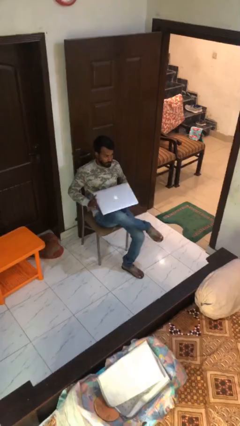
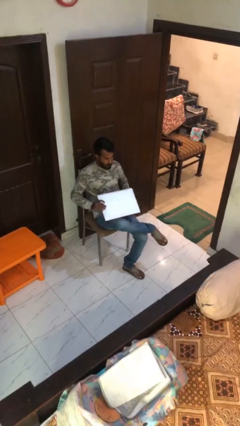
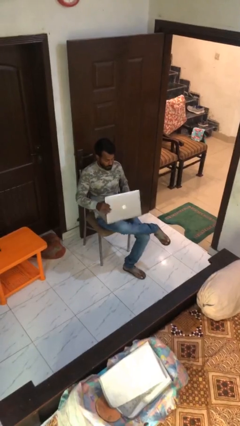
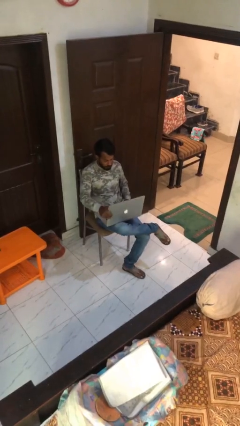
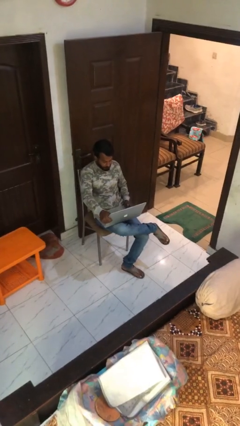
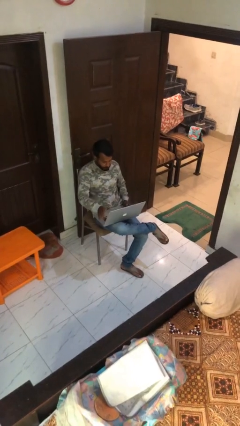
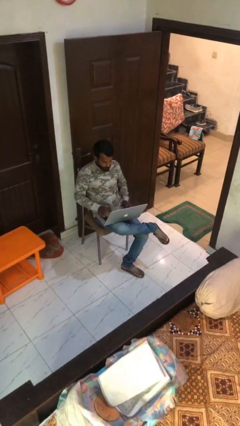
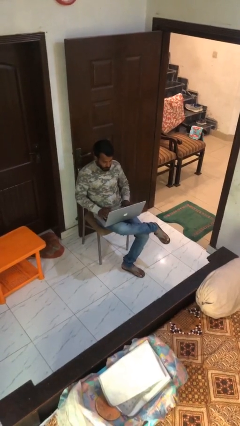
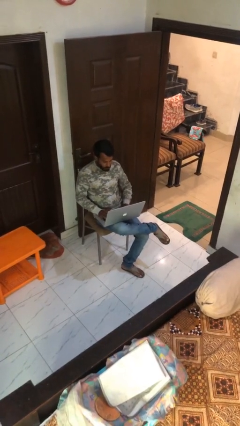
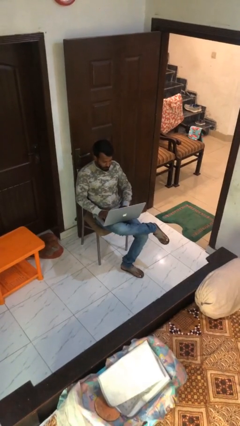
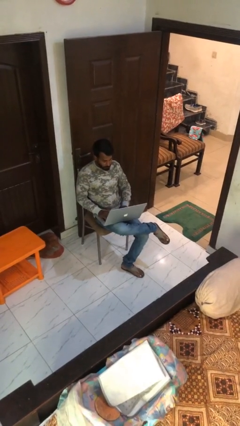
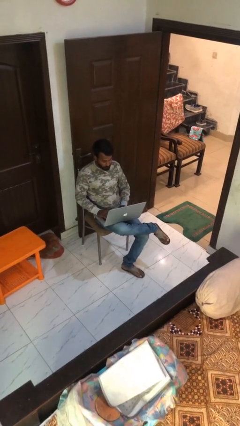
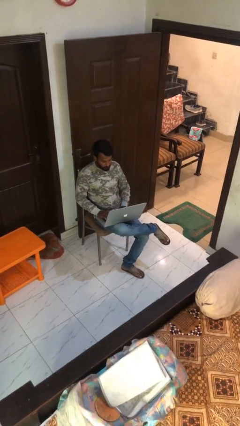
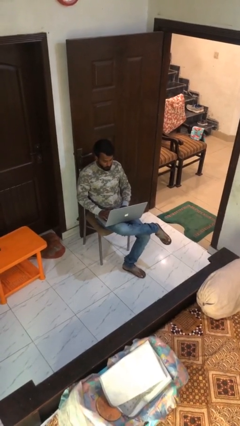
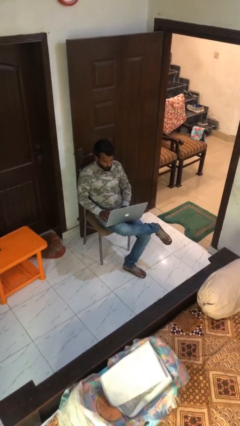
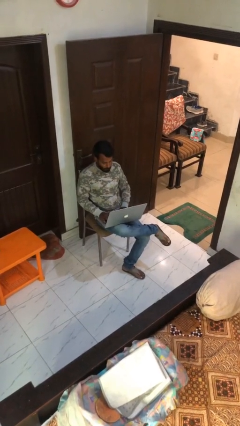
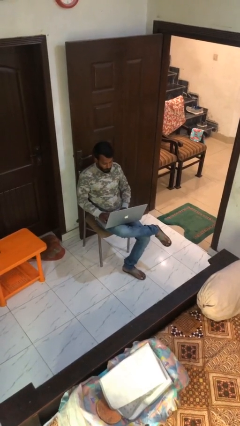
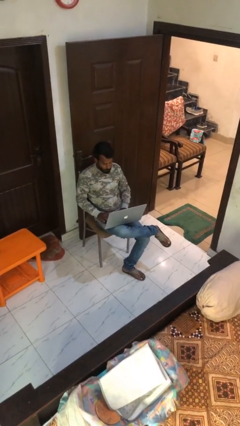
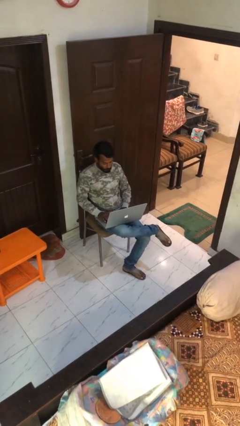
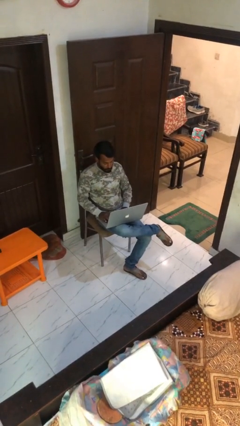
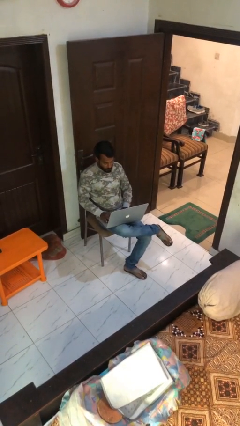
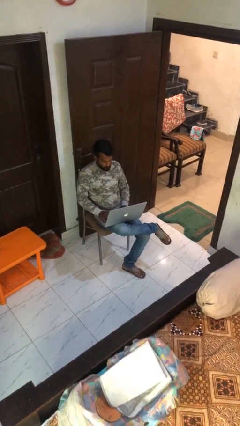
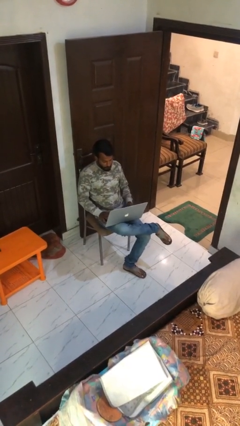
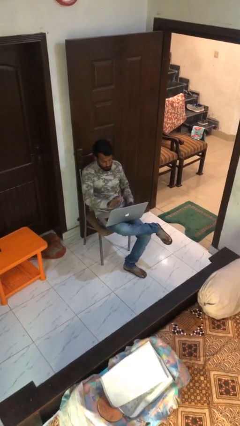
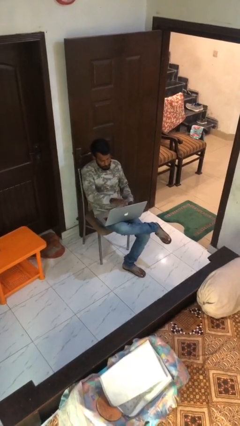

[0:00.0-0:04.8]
person interacts with laptop

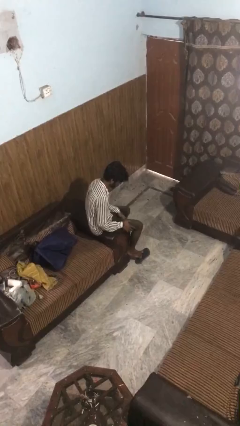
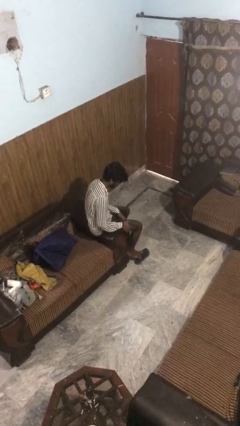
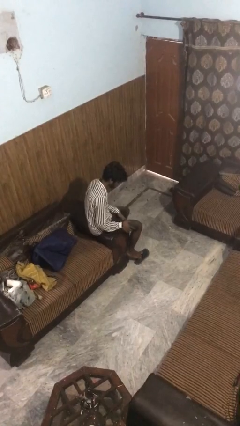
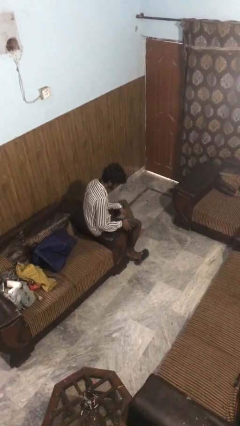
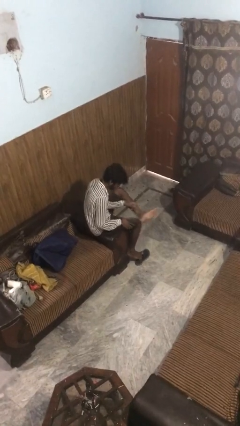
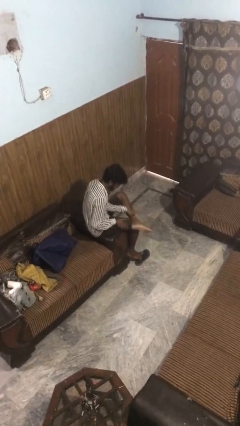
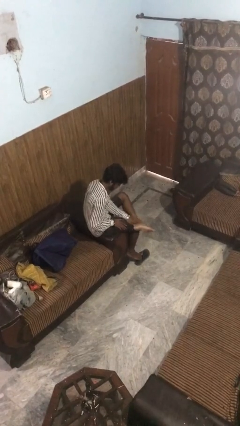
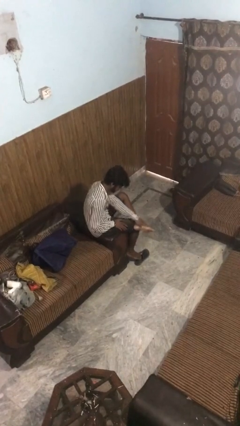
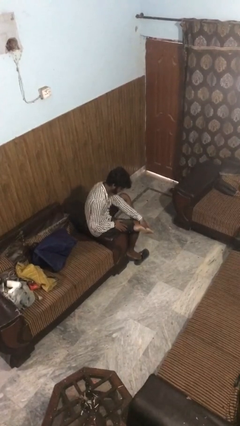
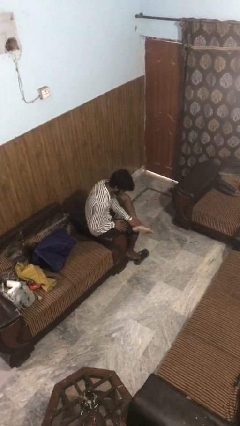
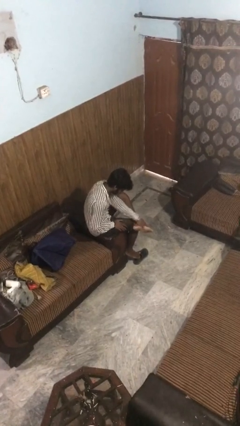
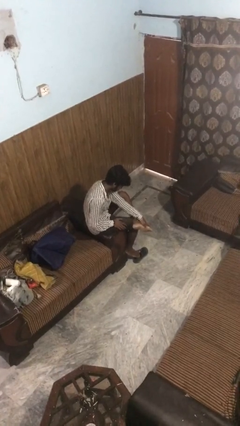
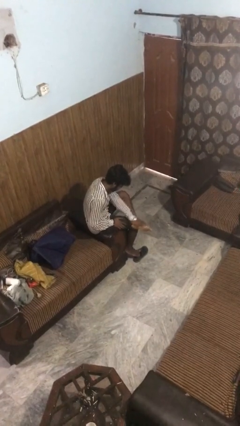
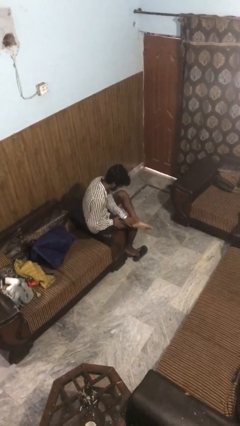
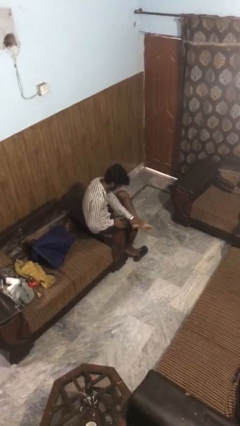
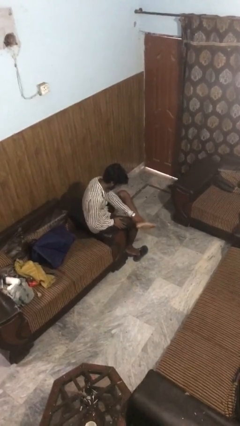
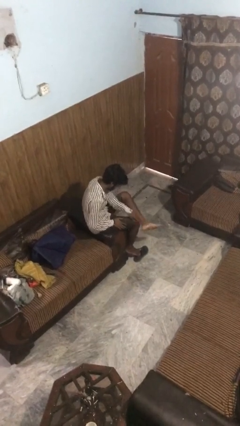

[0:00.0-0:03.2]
person rubs foot

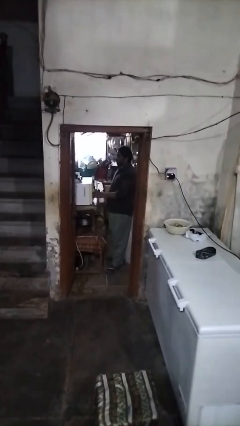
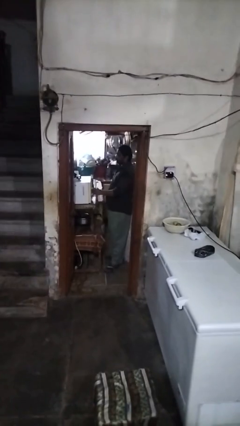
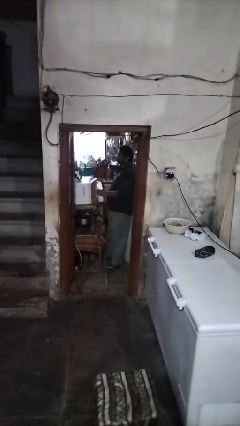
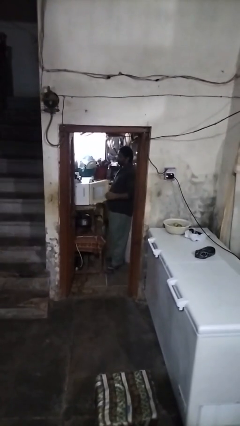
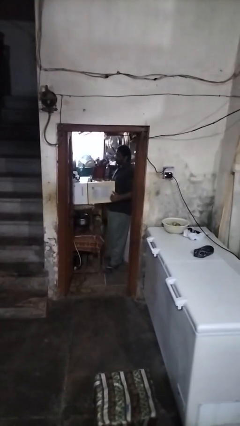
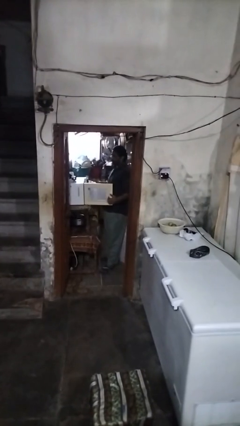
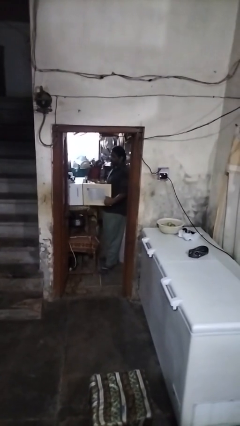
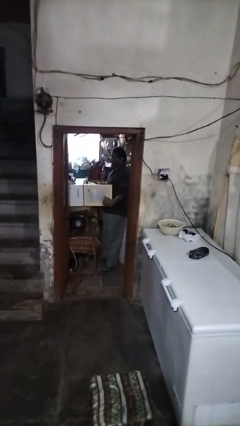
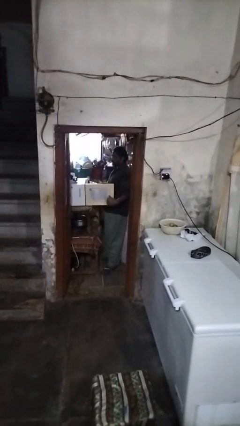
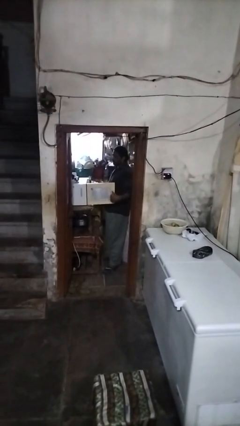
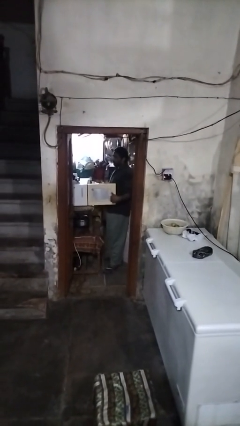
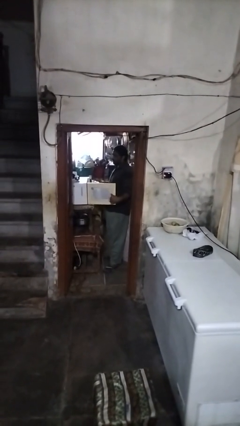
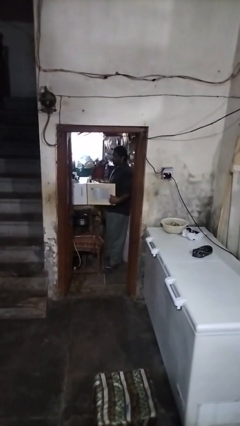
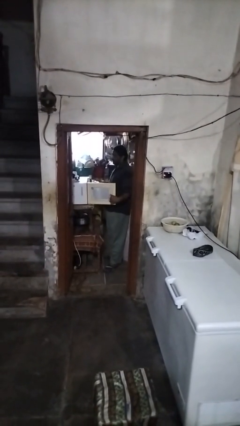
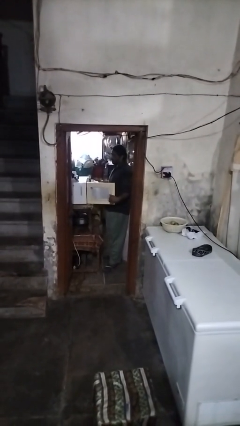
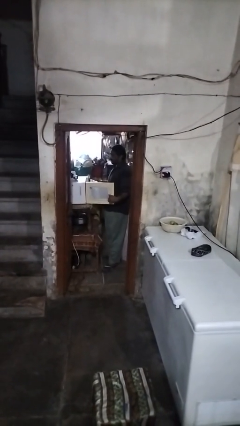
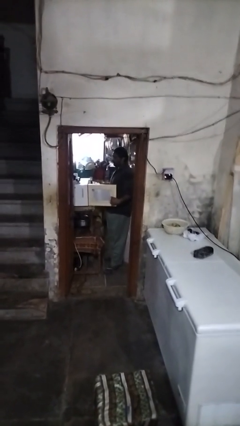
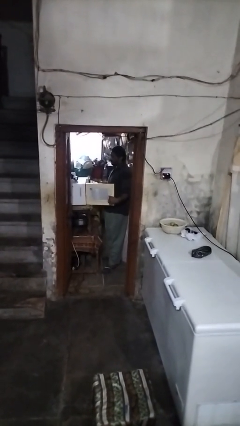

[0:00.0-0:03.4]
person opens oven door

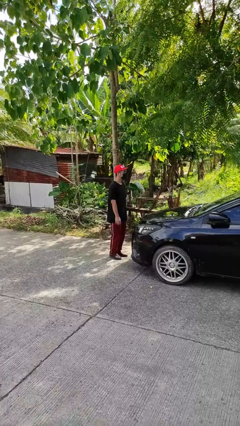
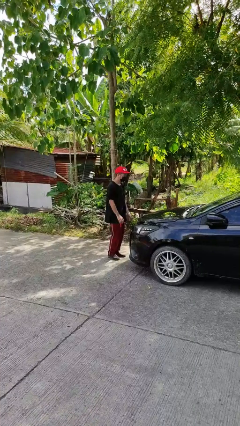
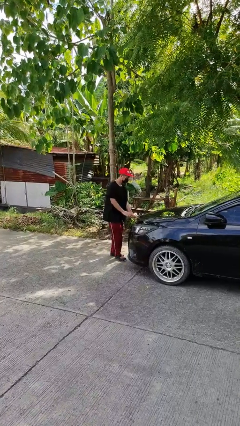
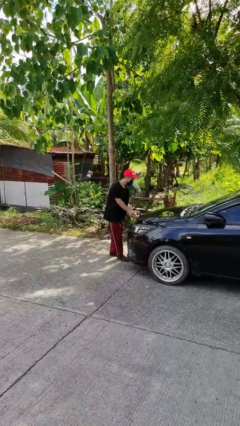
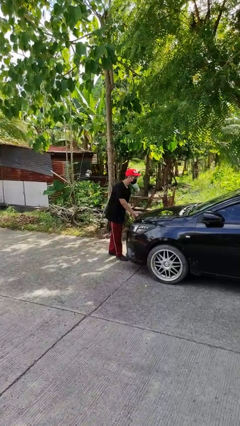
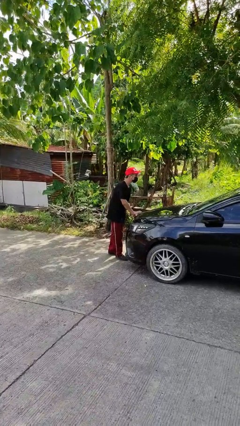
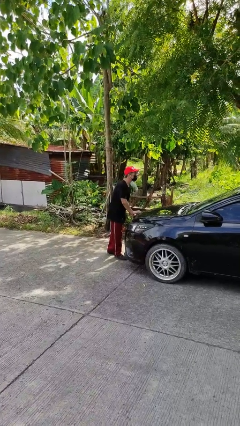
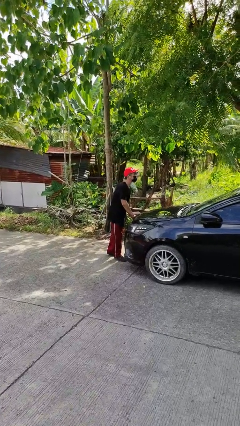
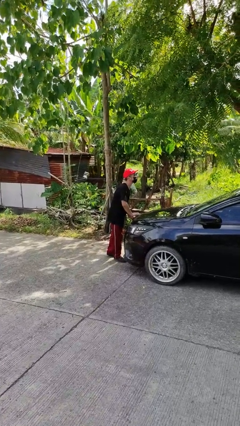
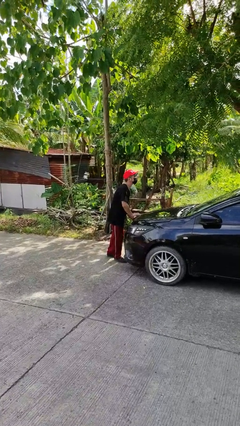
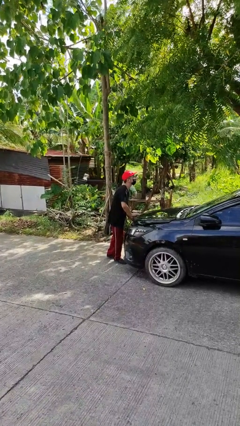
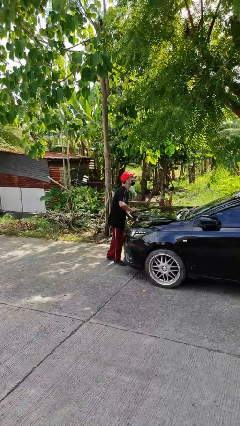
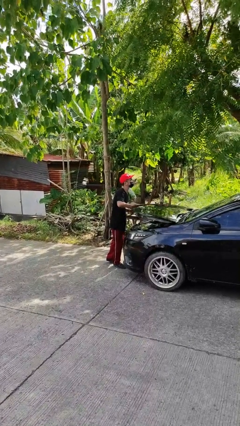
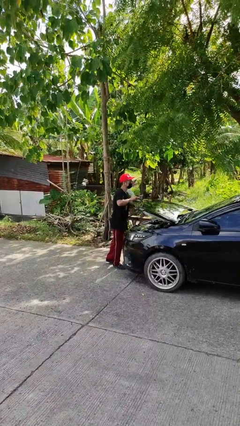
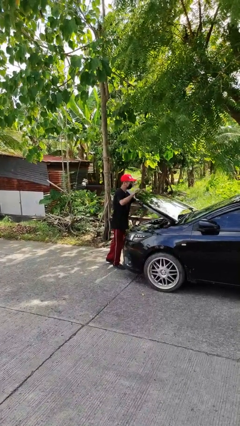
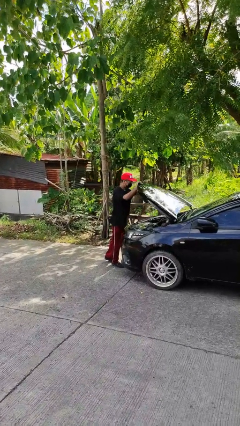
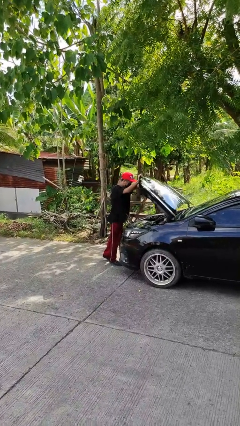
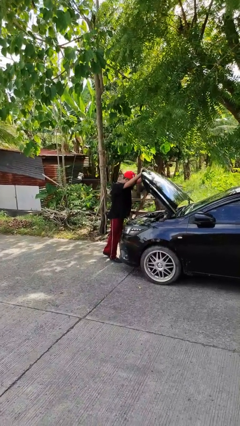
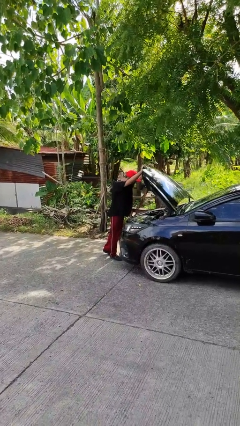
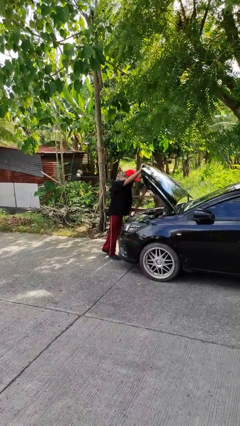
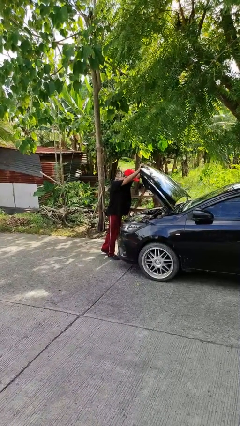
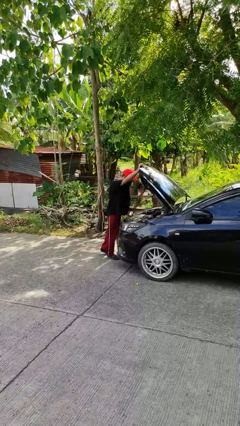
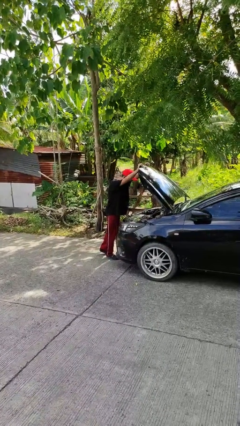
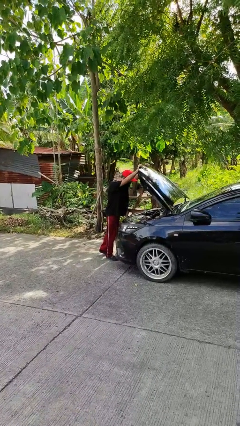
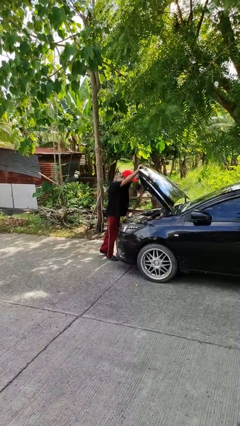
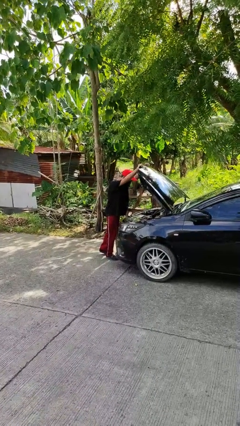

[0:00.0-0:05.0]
person opens car hood

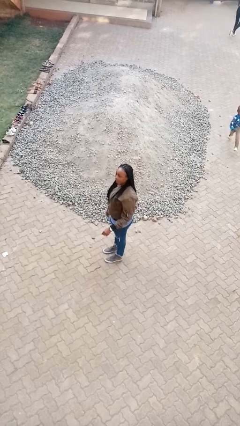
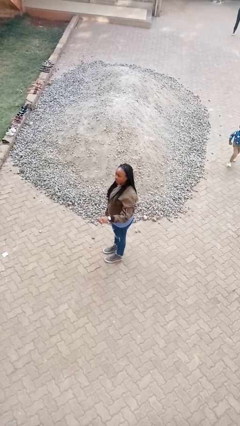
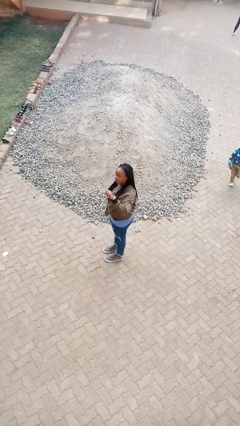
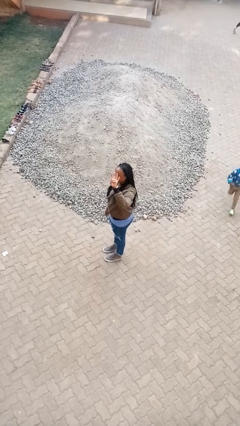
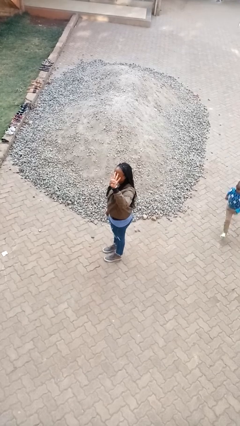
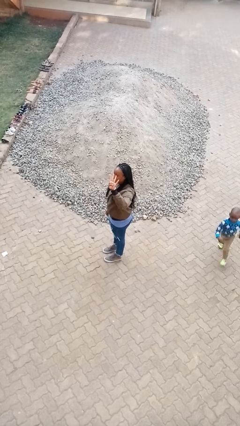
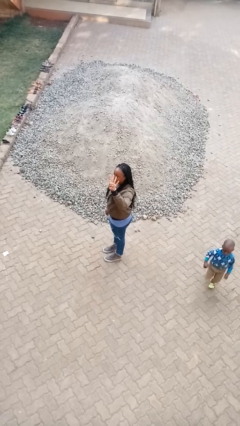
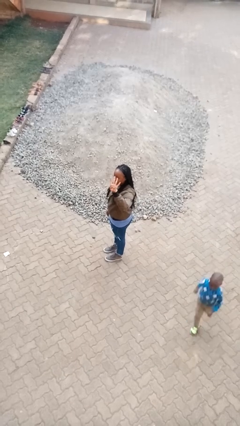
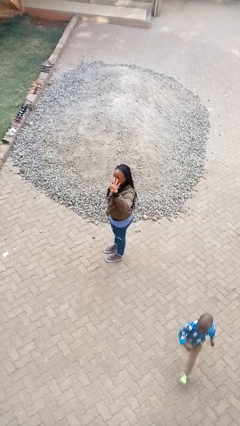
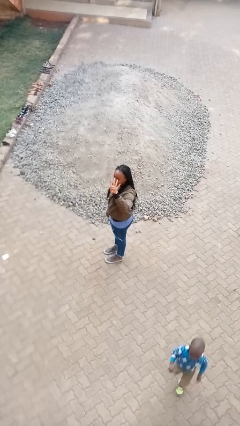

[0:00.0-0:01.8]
person gestures number four
